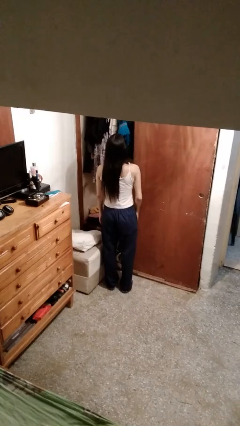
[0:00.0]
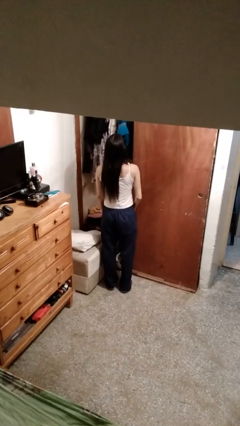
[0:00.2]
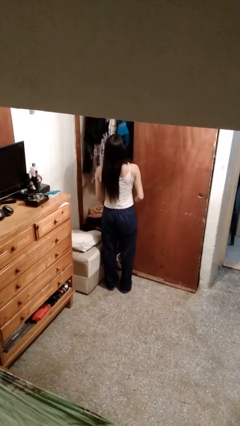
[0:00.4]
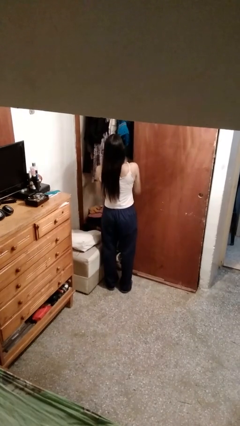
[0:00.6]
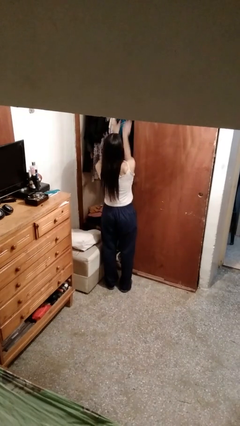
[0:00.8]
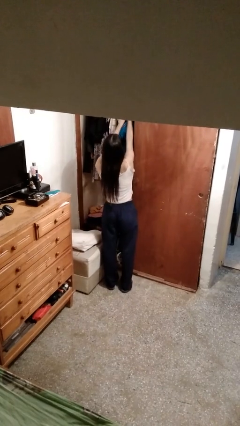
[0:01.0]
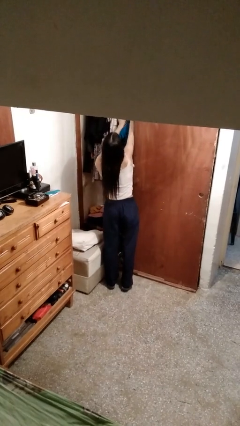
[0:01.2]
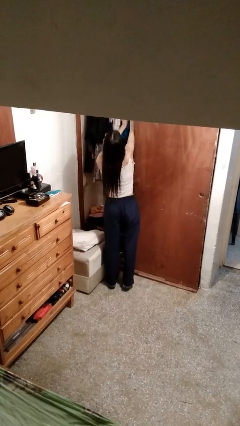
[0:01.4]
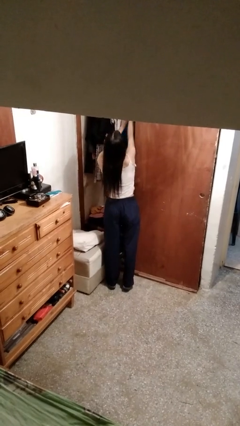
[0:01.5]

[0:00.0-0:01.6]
person takes clothes from closet

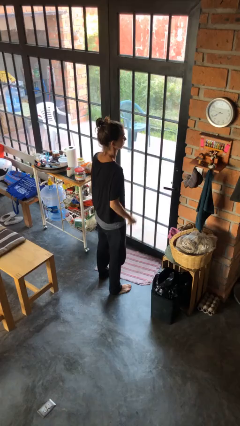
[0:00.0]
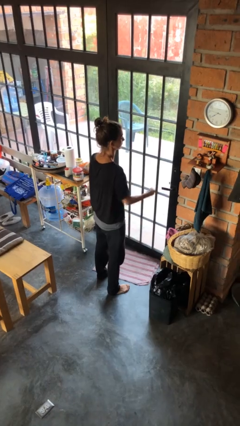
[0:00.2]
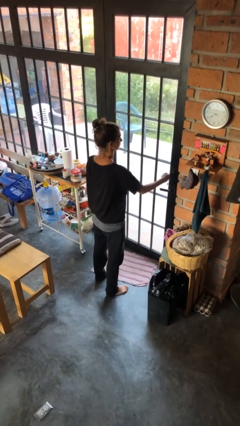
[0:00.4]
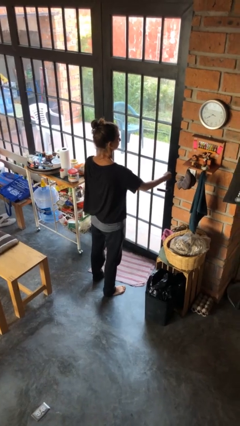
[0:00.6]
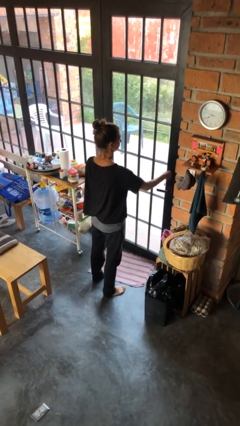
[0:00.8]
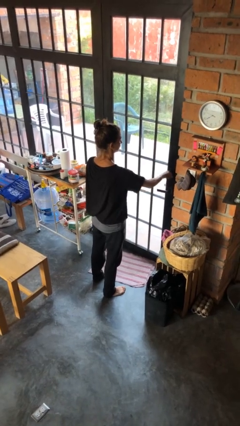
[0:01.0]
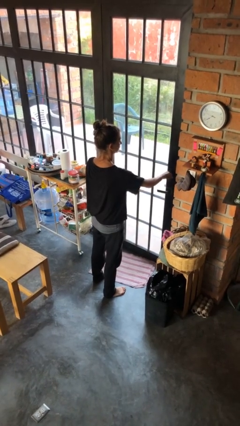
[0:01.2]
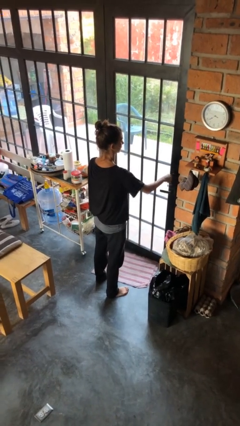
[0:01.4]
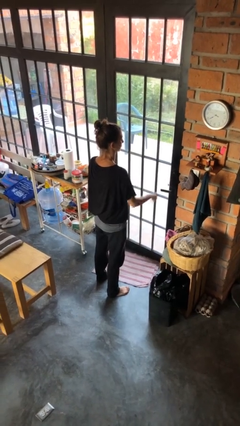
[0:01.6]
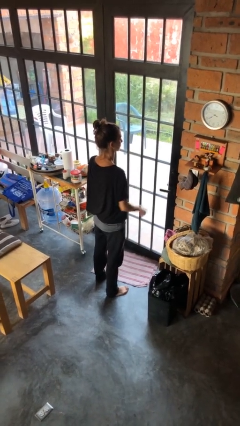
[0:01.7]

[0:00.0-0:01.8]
person unlocks door with keys

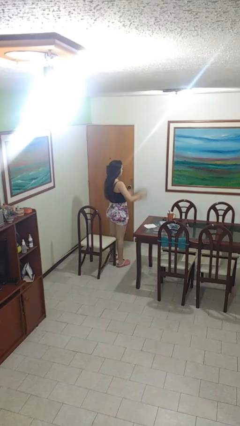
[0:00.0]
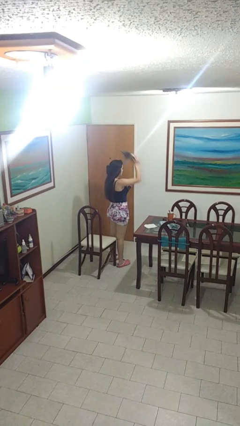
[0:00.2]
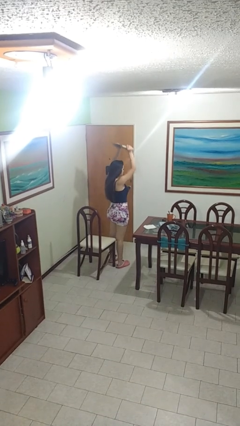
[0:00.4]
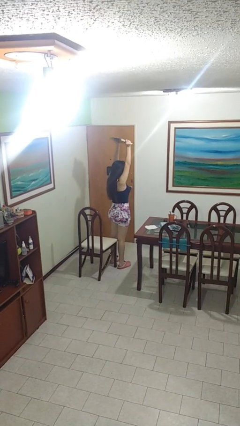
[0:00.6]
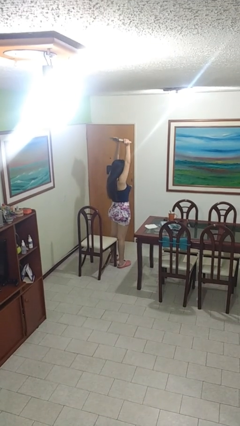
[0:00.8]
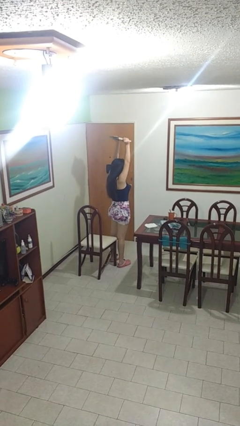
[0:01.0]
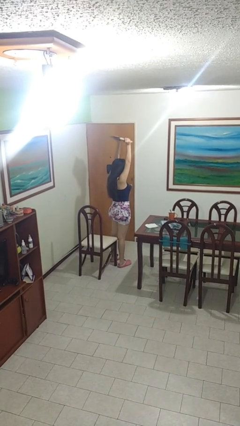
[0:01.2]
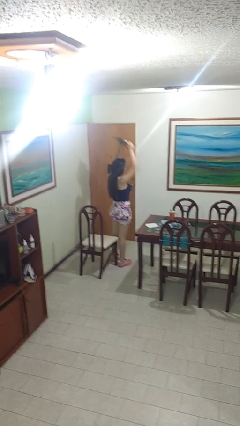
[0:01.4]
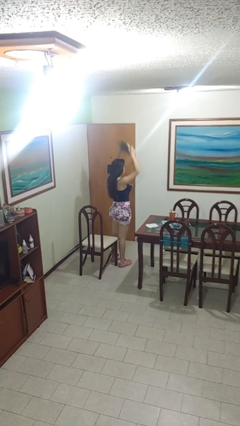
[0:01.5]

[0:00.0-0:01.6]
person holds object above head

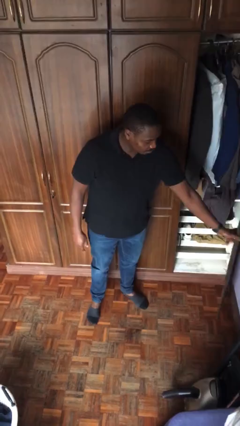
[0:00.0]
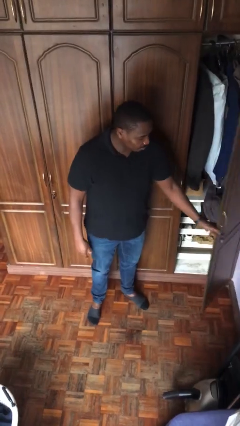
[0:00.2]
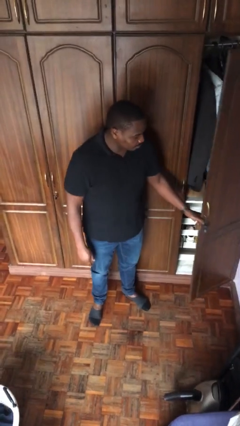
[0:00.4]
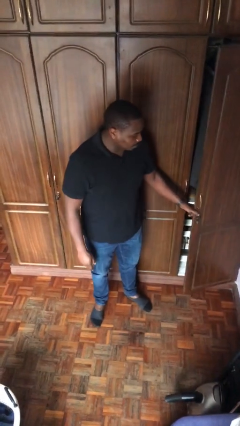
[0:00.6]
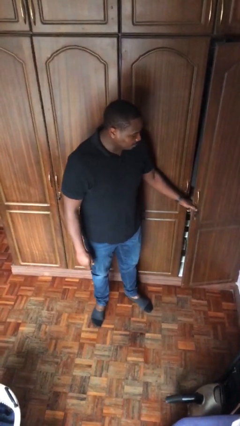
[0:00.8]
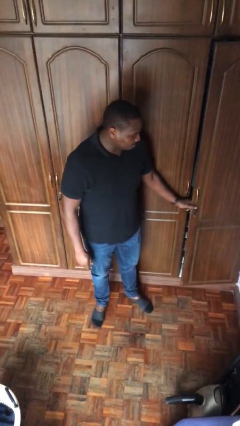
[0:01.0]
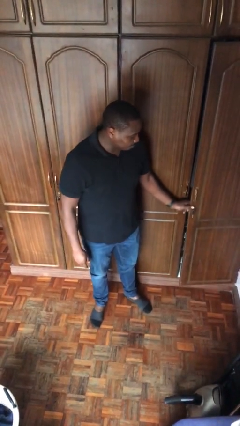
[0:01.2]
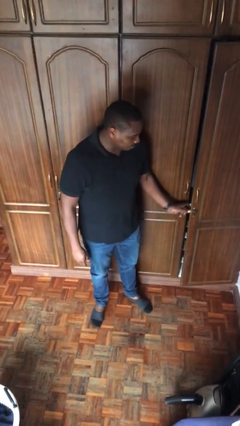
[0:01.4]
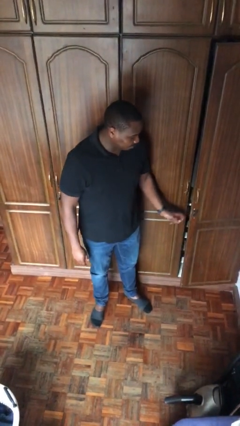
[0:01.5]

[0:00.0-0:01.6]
person closes closet door

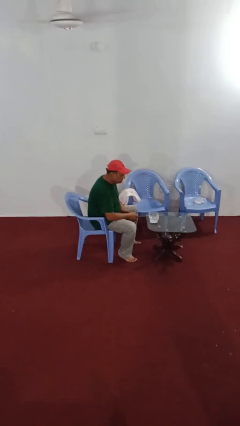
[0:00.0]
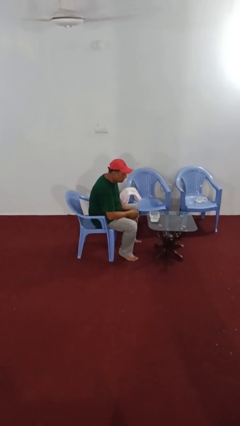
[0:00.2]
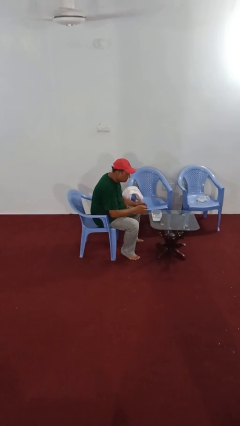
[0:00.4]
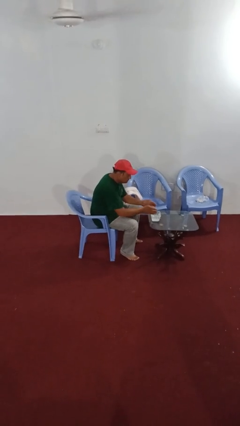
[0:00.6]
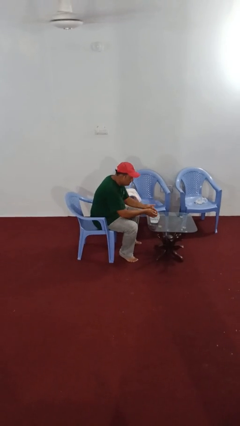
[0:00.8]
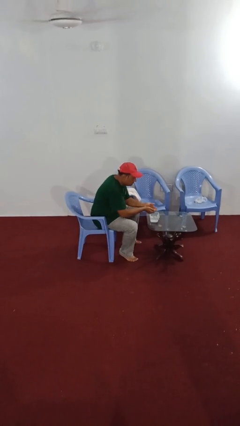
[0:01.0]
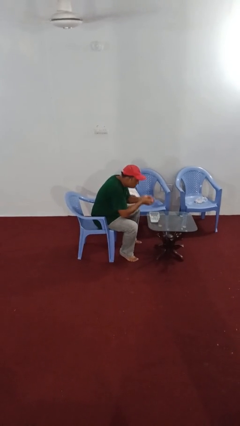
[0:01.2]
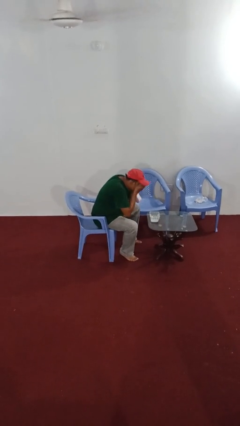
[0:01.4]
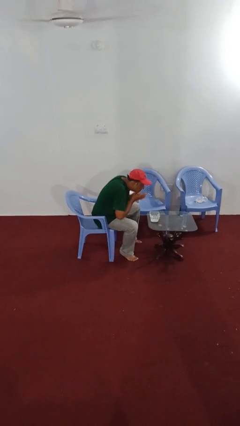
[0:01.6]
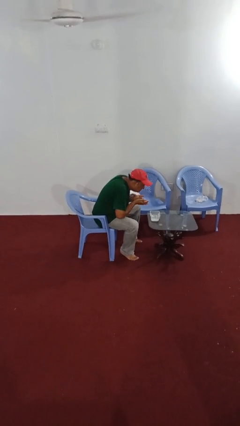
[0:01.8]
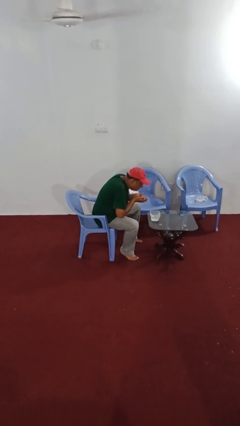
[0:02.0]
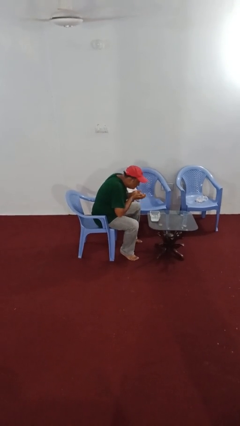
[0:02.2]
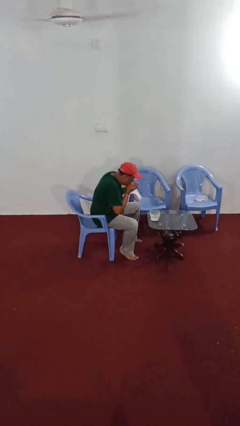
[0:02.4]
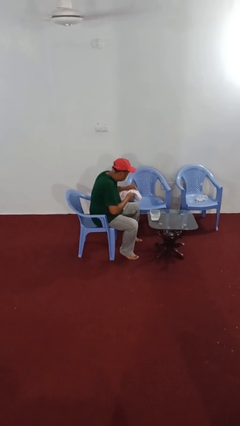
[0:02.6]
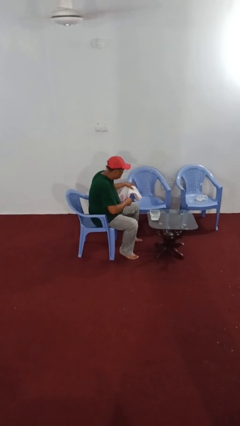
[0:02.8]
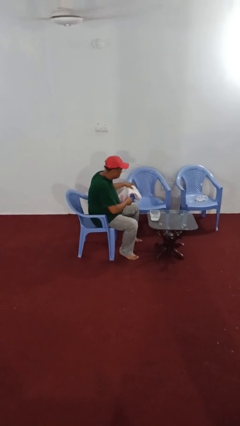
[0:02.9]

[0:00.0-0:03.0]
person washes face

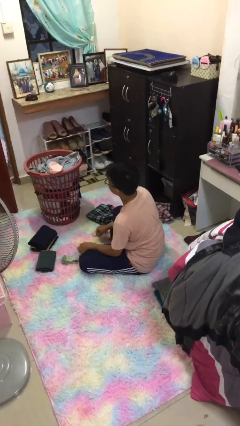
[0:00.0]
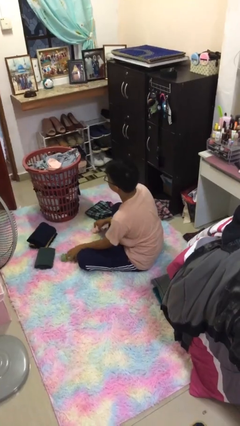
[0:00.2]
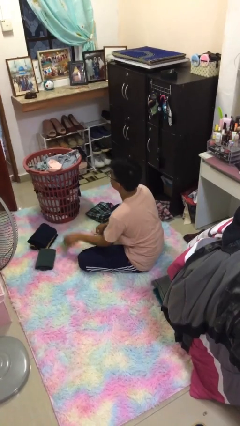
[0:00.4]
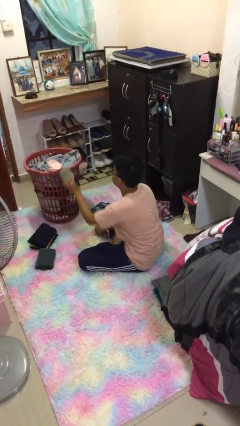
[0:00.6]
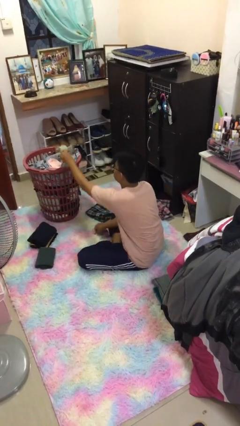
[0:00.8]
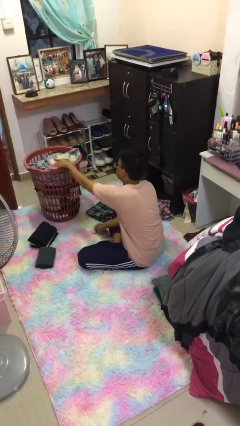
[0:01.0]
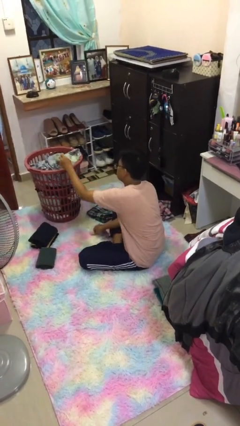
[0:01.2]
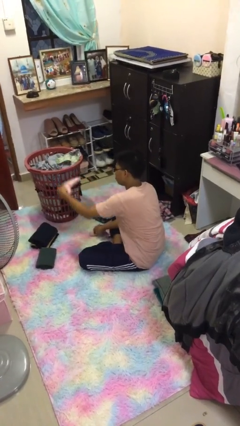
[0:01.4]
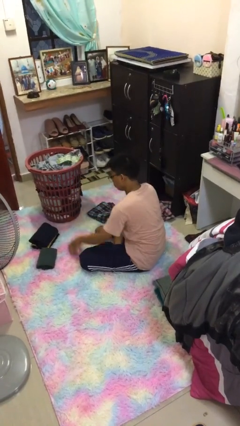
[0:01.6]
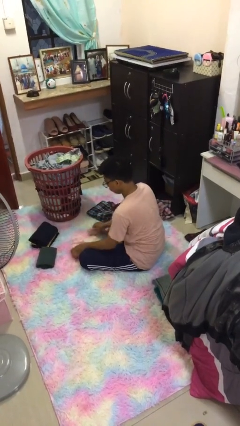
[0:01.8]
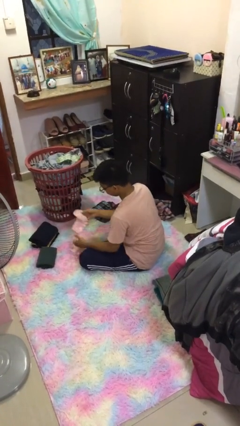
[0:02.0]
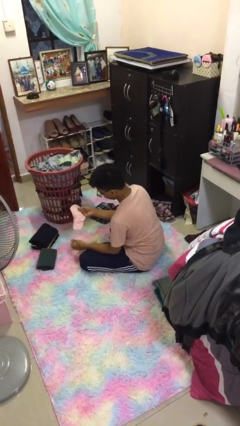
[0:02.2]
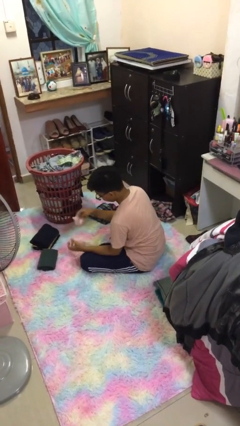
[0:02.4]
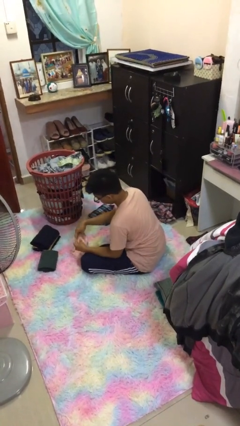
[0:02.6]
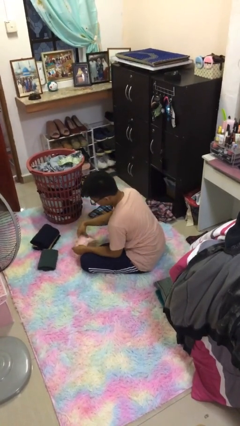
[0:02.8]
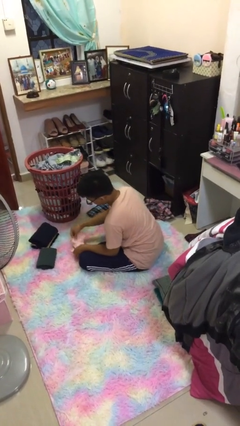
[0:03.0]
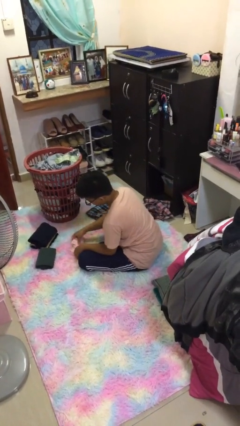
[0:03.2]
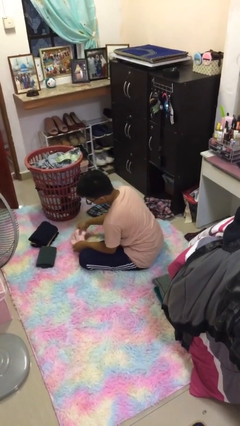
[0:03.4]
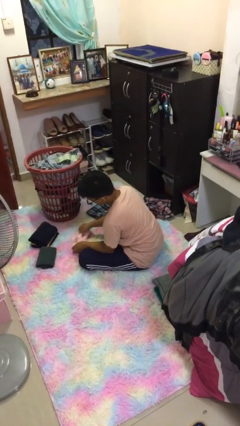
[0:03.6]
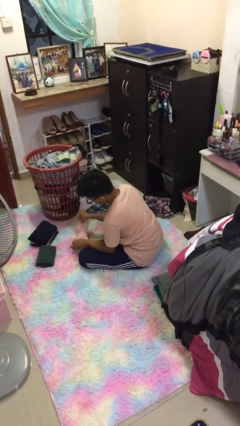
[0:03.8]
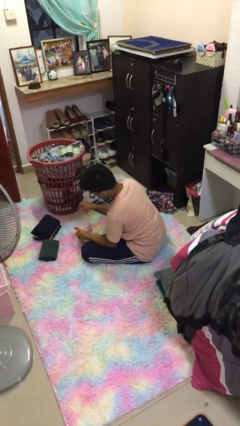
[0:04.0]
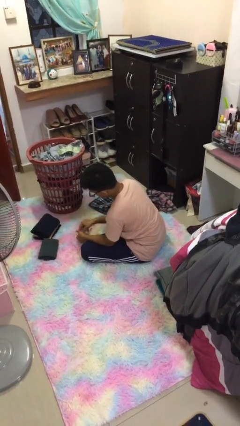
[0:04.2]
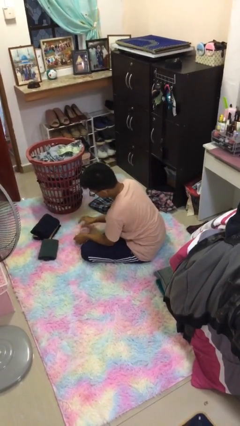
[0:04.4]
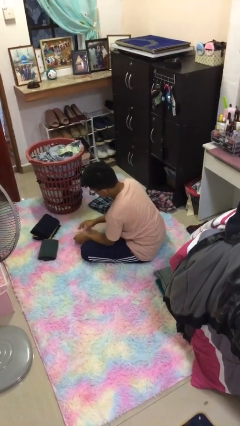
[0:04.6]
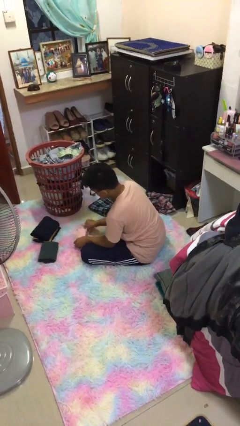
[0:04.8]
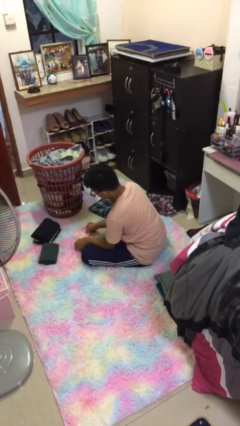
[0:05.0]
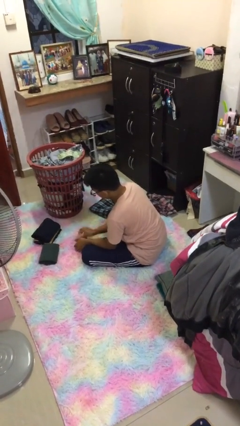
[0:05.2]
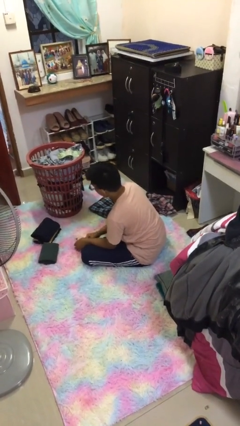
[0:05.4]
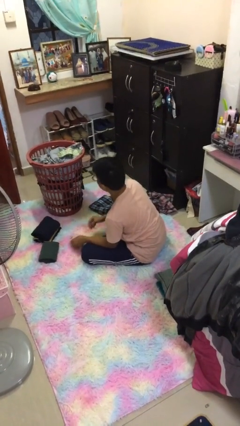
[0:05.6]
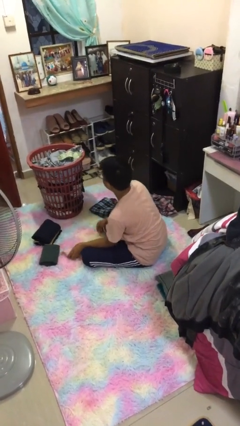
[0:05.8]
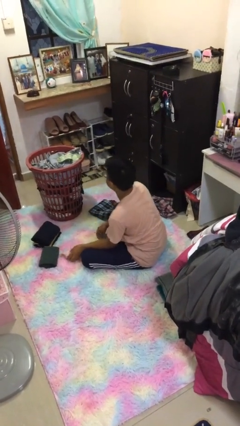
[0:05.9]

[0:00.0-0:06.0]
person folds socks

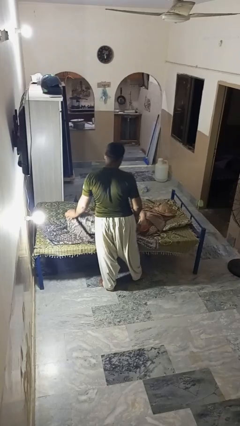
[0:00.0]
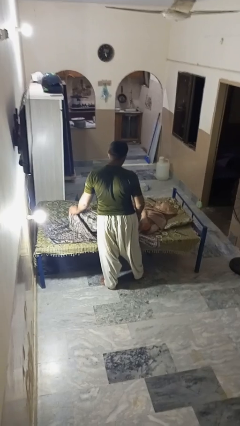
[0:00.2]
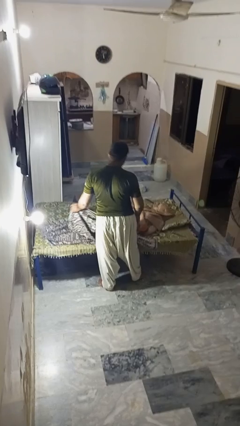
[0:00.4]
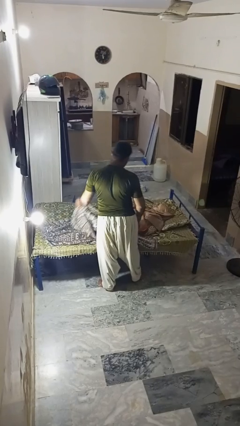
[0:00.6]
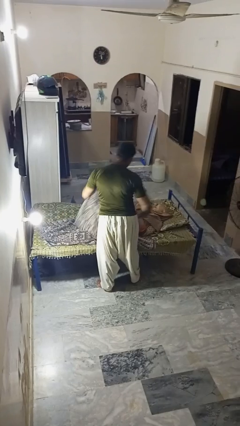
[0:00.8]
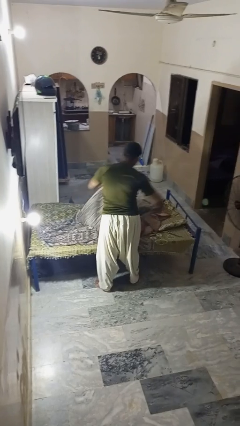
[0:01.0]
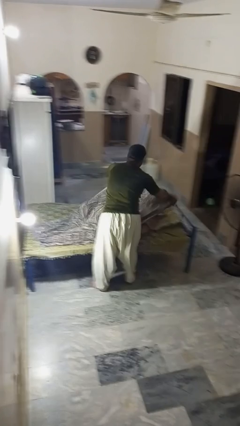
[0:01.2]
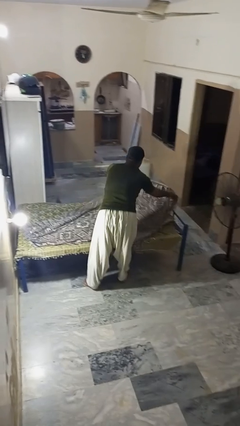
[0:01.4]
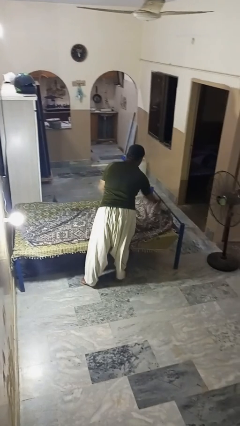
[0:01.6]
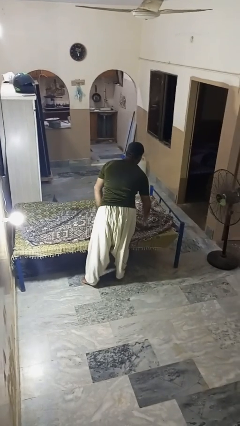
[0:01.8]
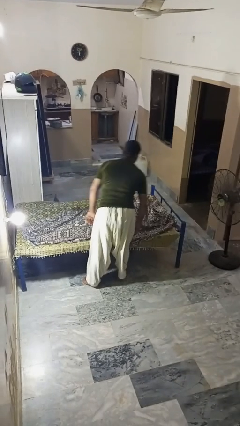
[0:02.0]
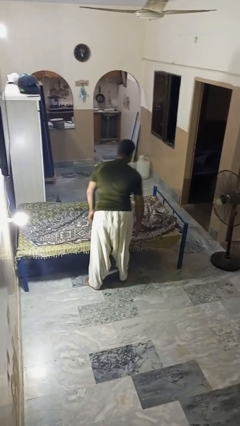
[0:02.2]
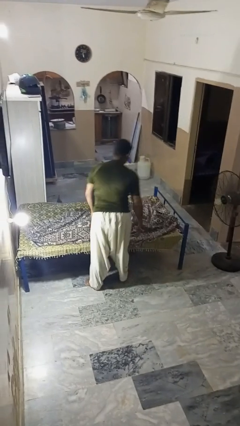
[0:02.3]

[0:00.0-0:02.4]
person covers friend with blanket
